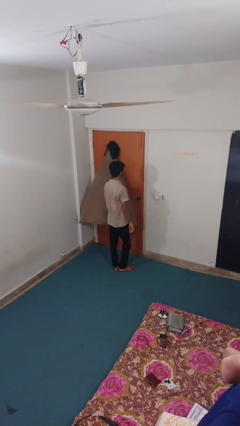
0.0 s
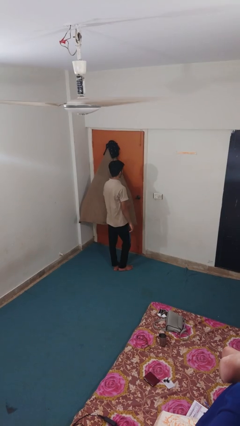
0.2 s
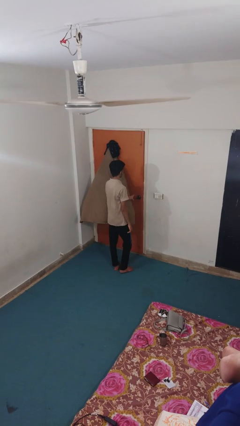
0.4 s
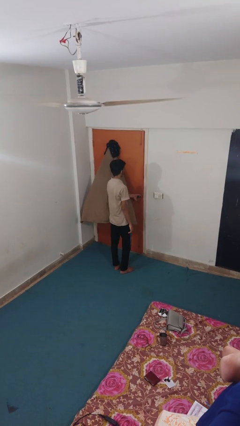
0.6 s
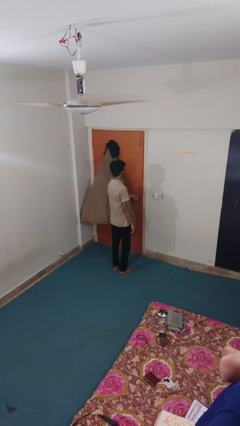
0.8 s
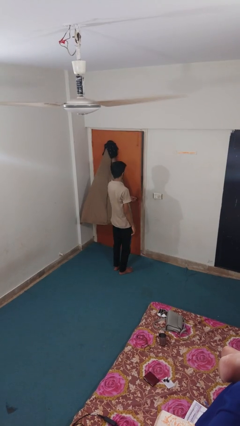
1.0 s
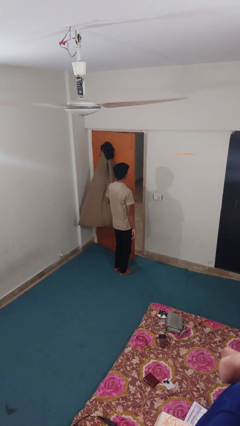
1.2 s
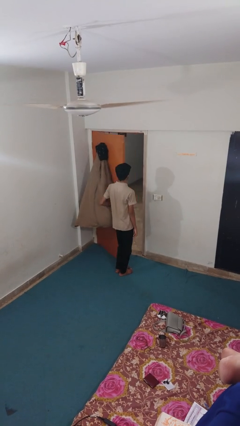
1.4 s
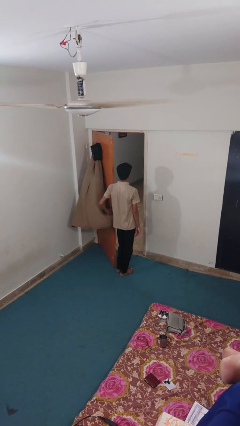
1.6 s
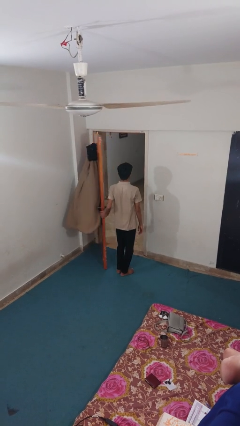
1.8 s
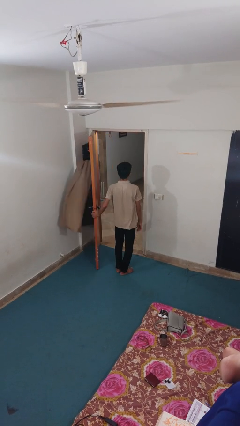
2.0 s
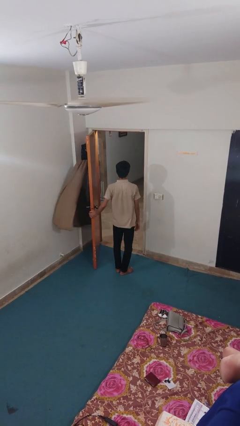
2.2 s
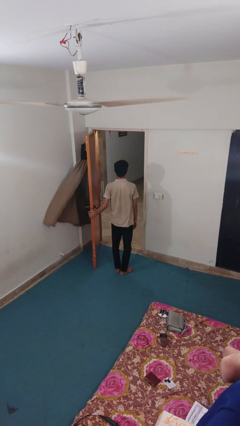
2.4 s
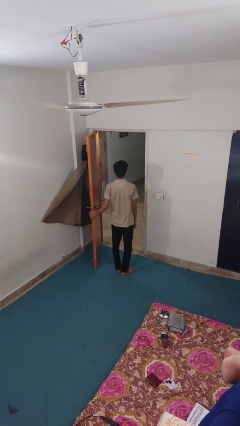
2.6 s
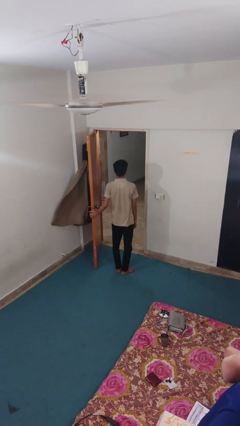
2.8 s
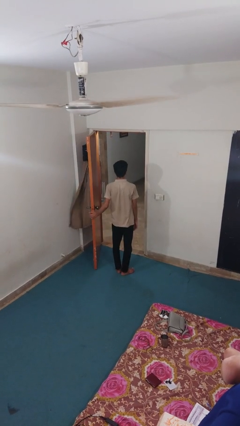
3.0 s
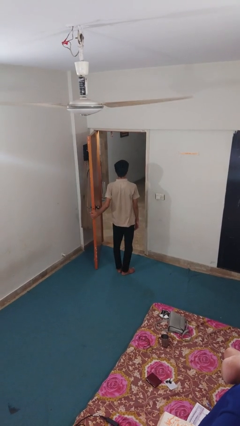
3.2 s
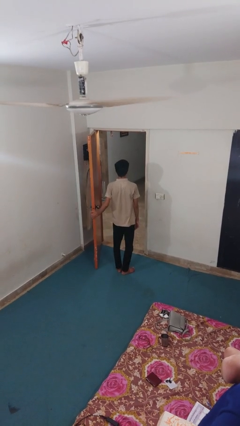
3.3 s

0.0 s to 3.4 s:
person opens facility door

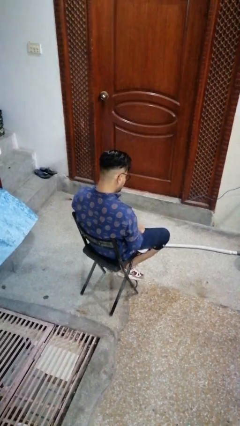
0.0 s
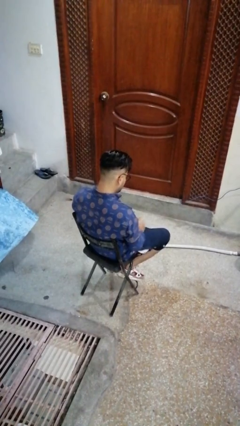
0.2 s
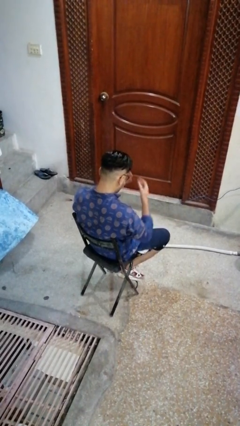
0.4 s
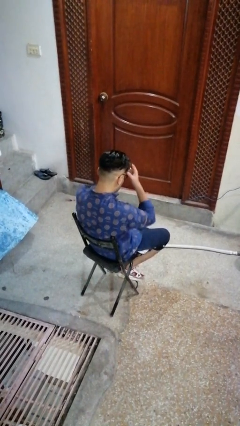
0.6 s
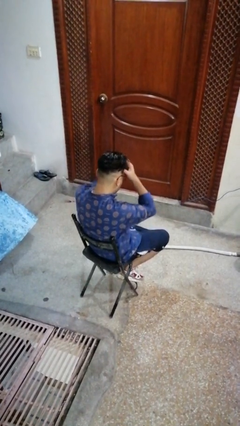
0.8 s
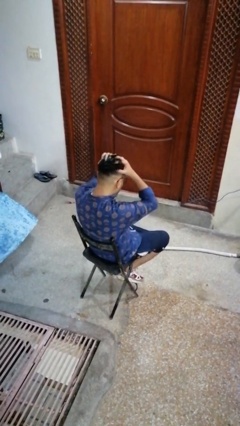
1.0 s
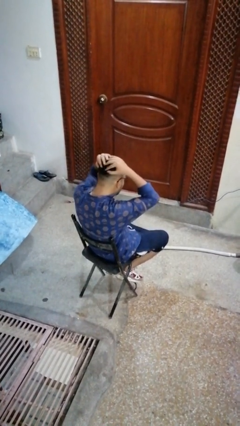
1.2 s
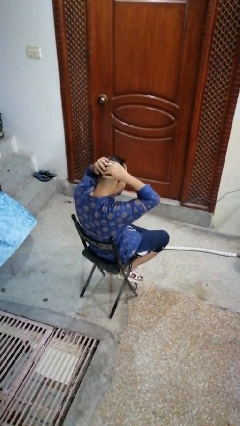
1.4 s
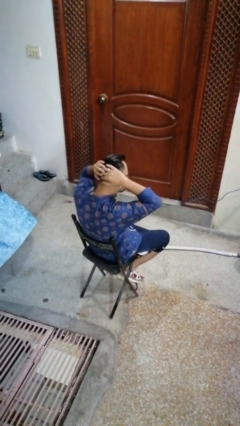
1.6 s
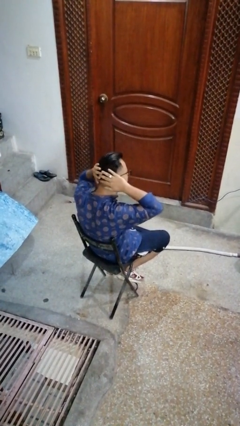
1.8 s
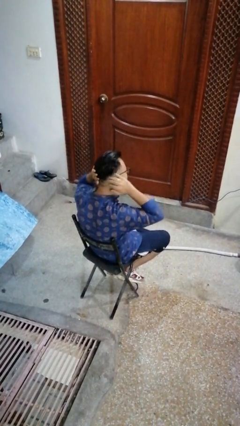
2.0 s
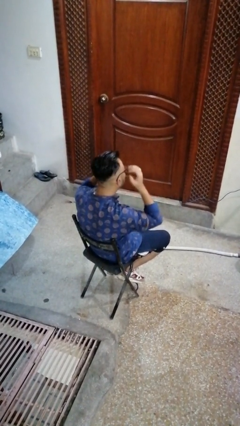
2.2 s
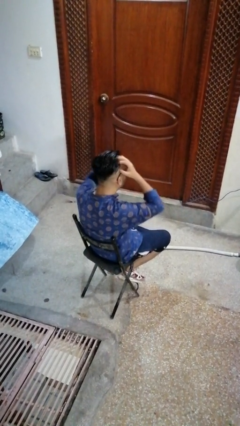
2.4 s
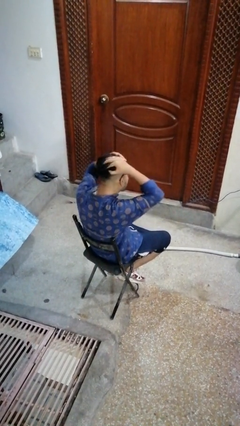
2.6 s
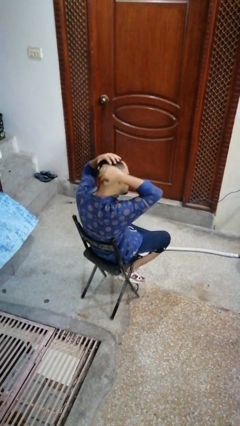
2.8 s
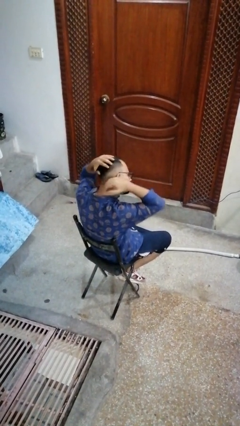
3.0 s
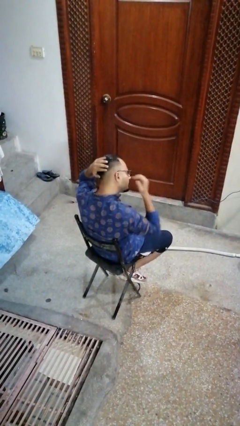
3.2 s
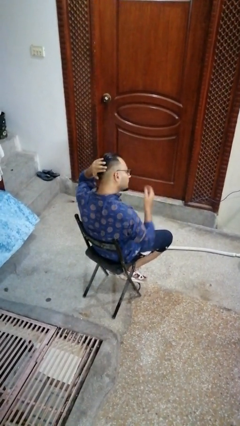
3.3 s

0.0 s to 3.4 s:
person strokes hair

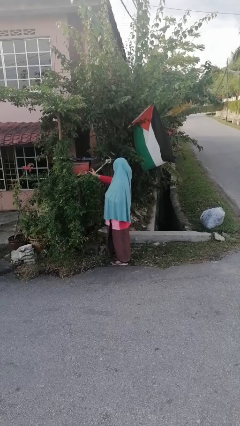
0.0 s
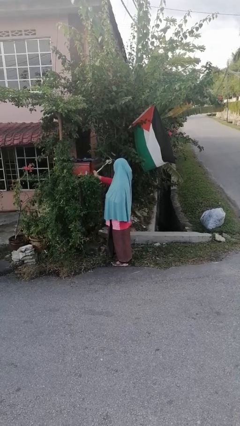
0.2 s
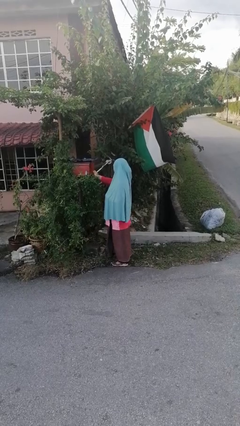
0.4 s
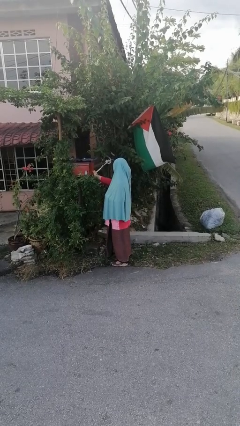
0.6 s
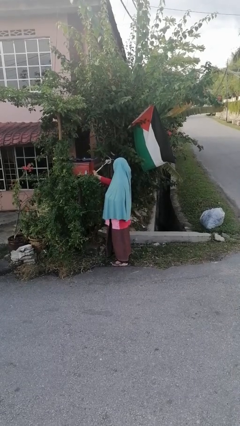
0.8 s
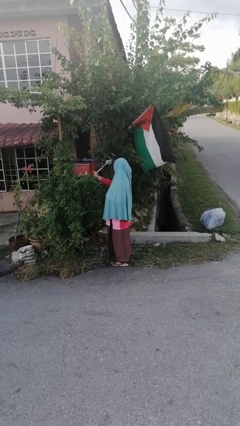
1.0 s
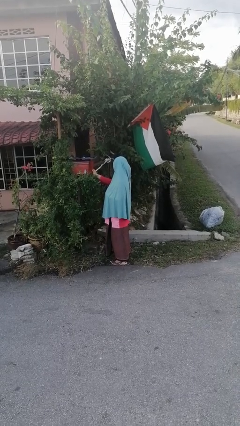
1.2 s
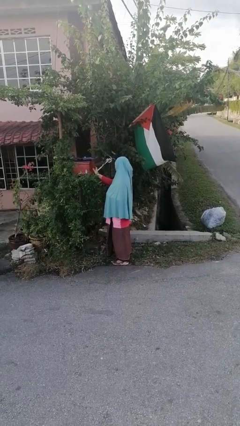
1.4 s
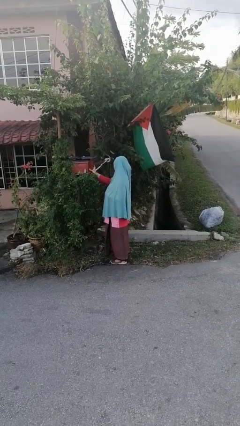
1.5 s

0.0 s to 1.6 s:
person opens mailbox

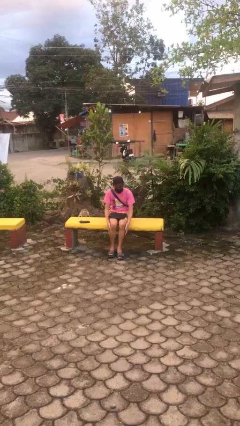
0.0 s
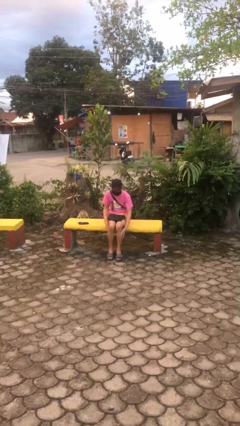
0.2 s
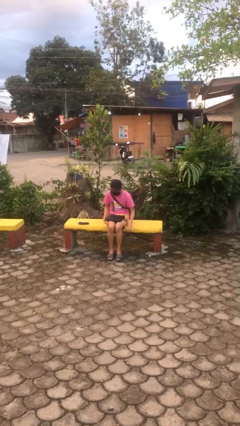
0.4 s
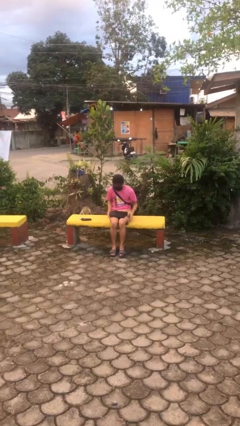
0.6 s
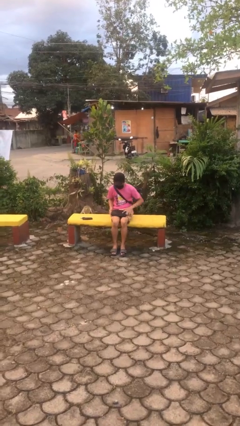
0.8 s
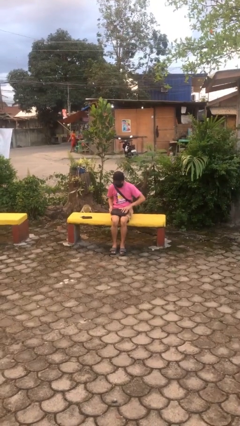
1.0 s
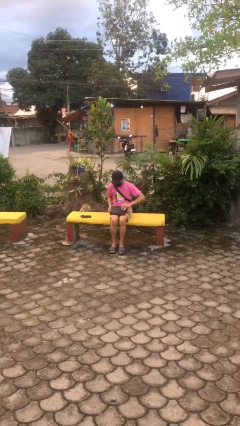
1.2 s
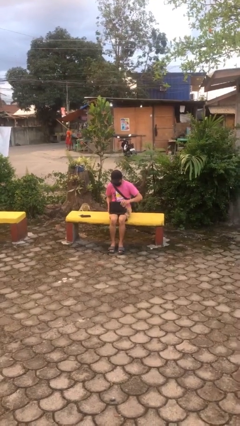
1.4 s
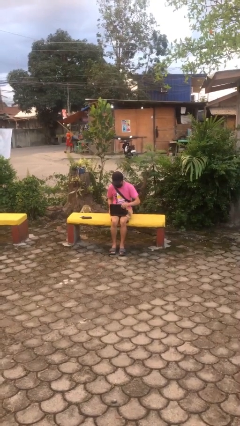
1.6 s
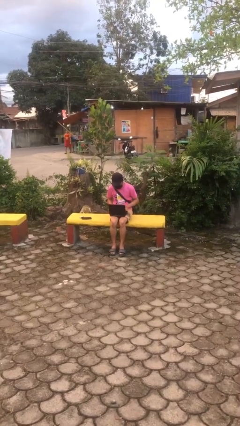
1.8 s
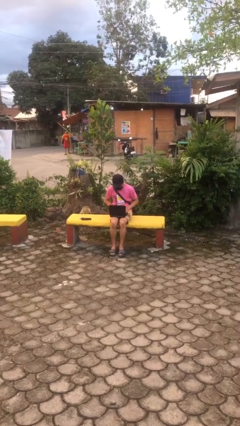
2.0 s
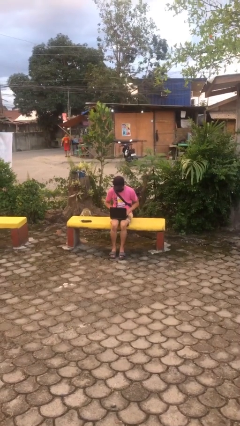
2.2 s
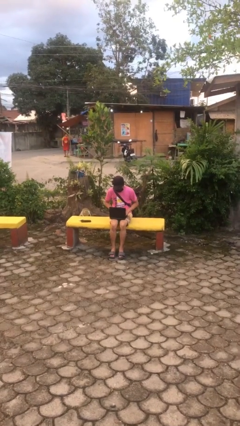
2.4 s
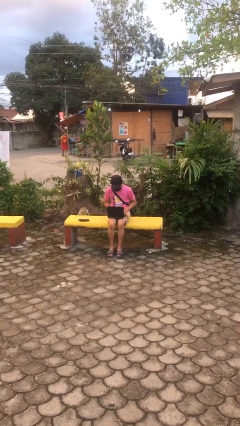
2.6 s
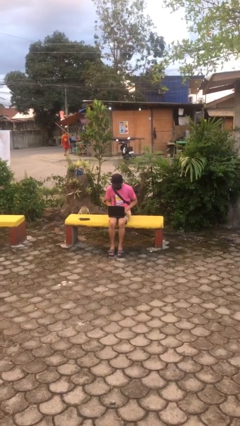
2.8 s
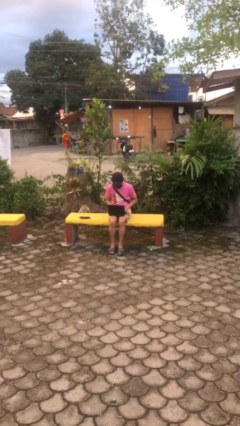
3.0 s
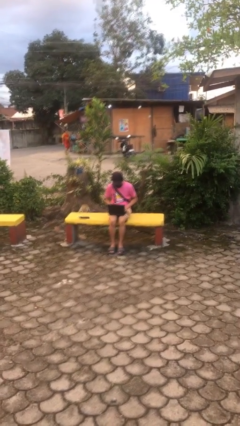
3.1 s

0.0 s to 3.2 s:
person interacts with laptop

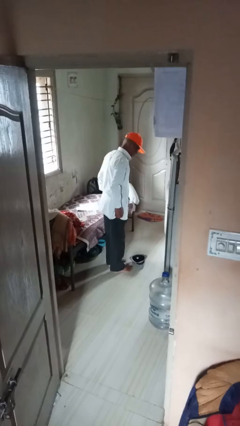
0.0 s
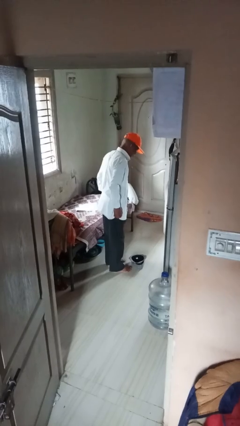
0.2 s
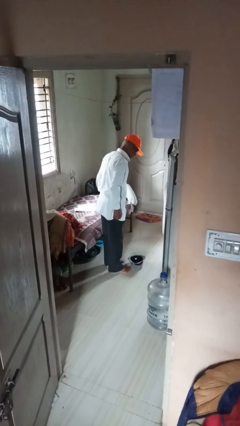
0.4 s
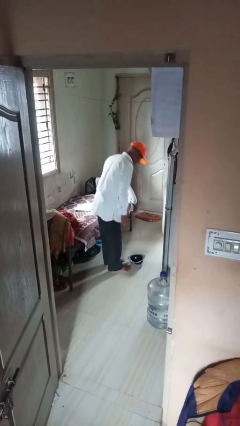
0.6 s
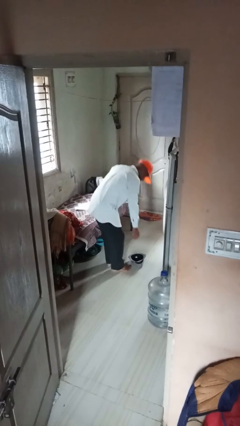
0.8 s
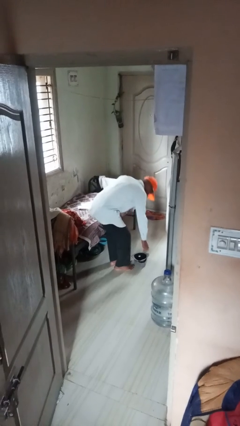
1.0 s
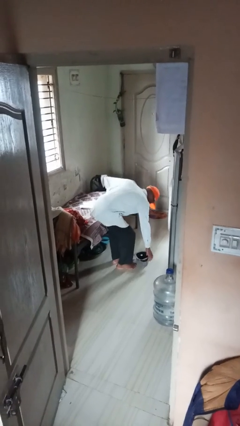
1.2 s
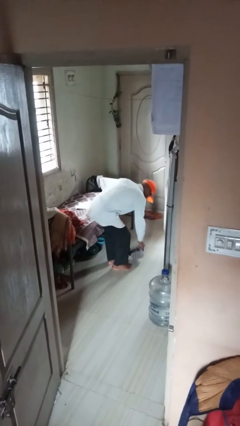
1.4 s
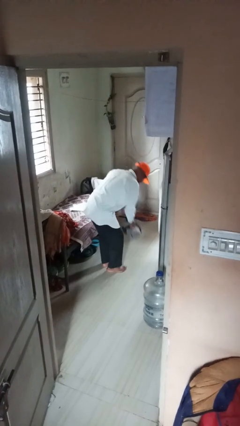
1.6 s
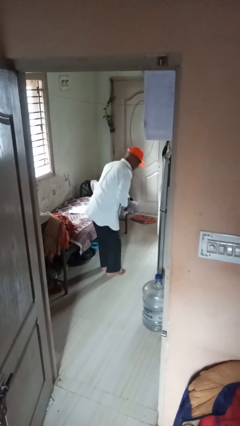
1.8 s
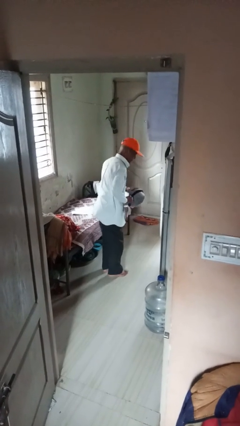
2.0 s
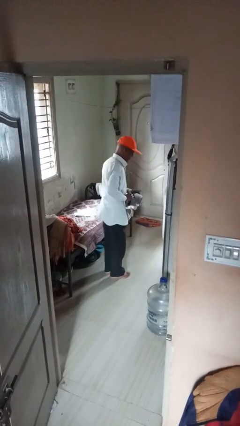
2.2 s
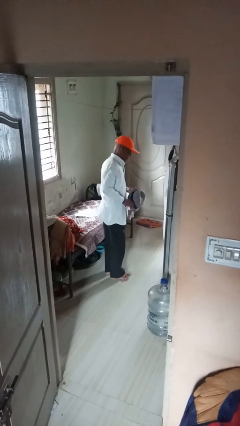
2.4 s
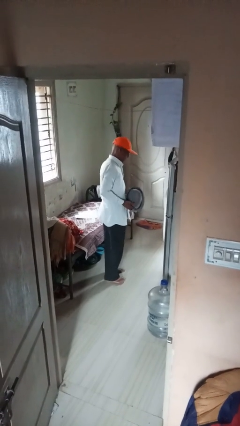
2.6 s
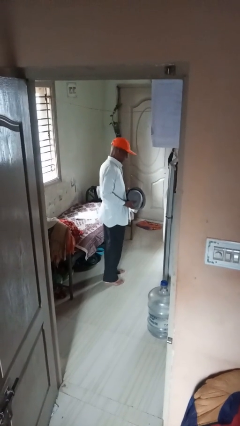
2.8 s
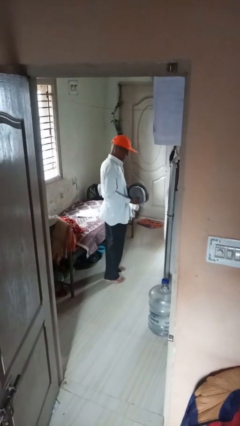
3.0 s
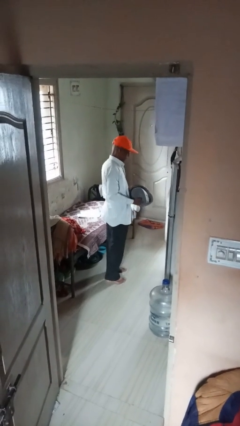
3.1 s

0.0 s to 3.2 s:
person picks up object from floor

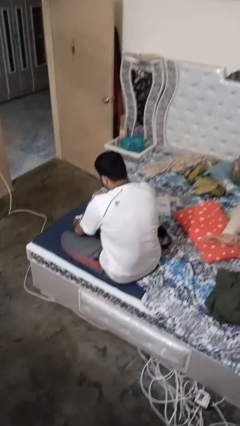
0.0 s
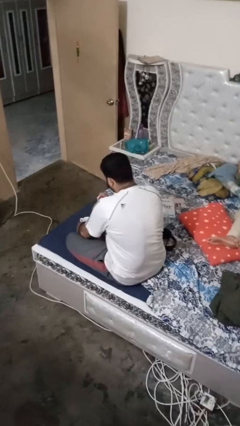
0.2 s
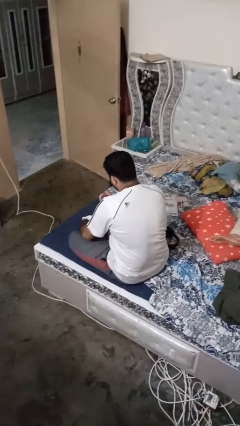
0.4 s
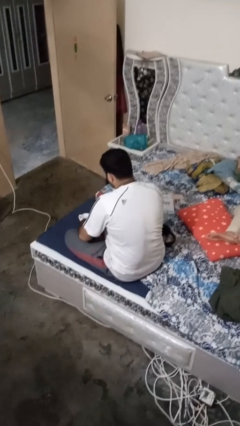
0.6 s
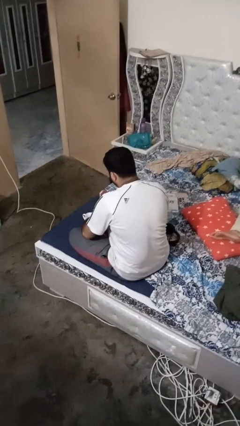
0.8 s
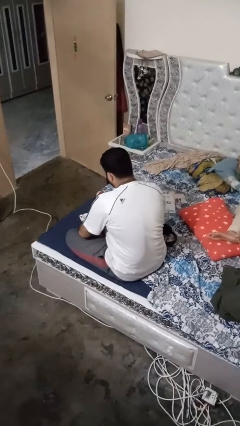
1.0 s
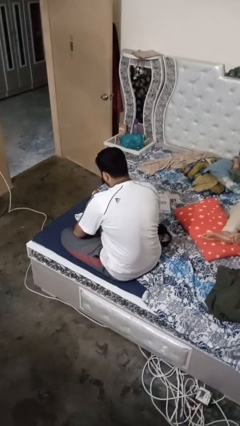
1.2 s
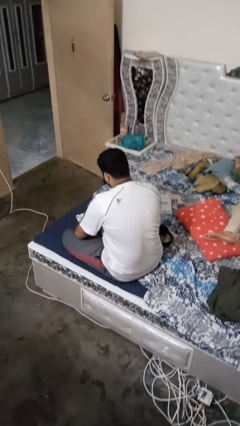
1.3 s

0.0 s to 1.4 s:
person screws lid to bottle

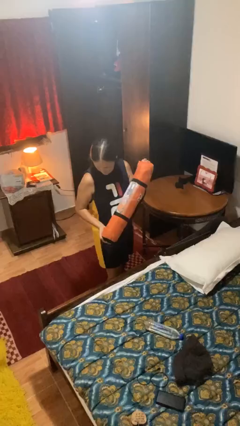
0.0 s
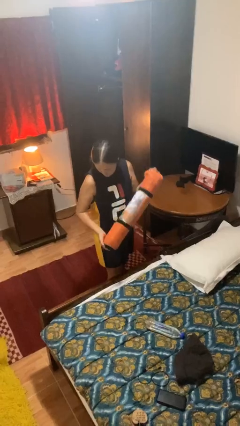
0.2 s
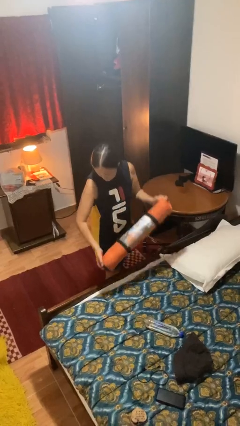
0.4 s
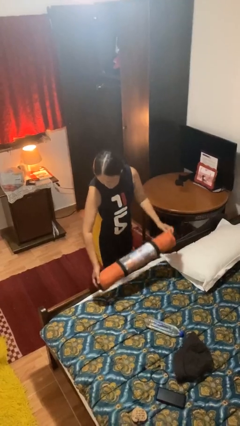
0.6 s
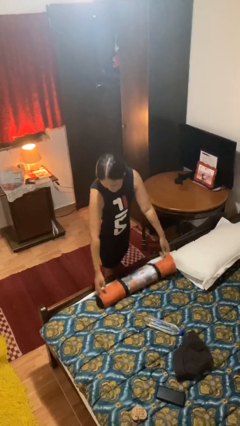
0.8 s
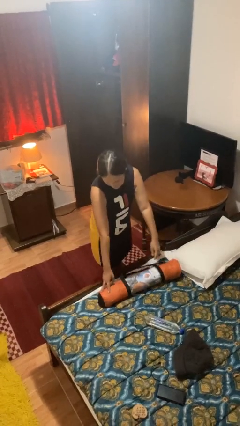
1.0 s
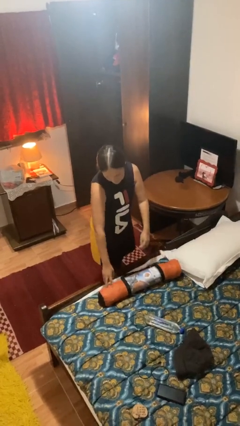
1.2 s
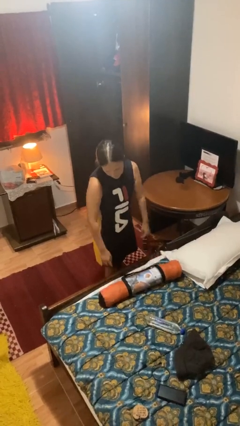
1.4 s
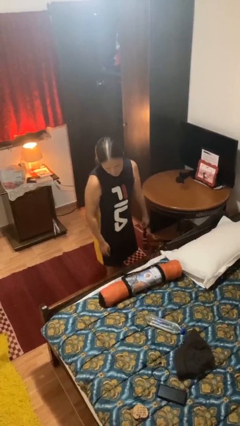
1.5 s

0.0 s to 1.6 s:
person puts down object on bed
